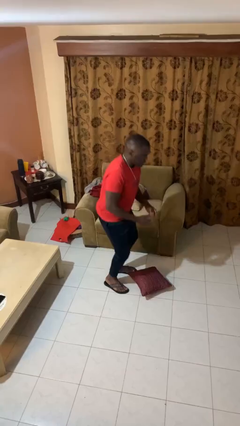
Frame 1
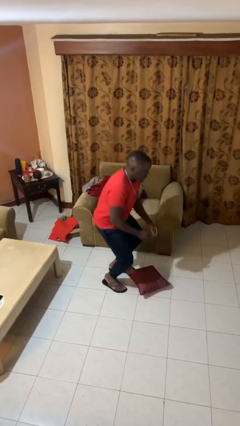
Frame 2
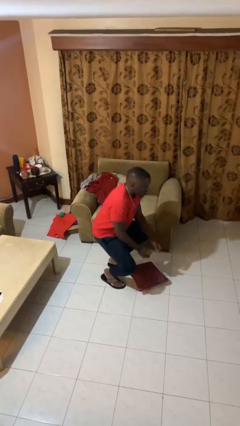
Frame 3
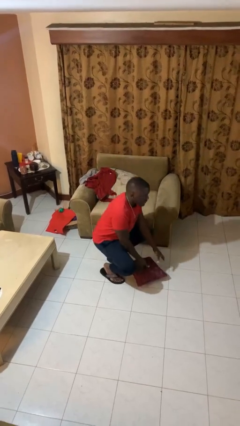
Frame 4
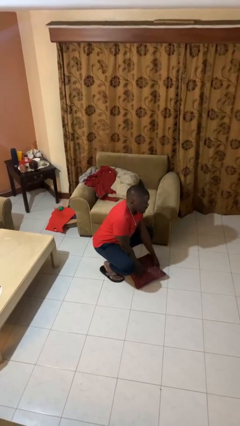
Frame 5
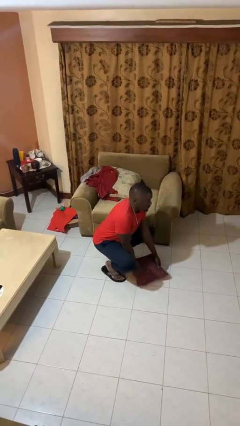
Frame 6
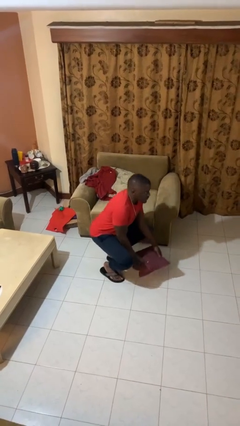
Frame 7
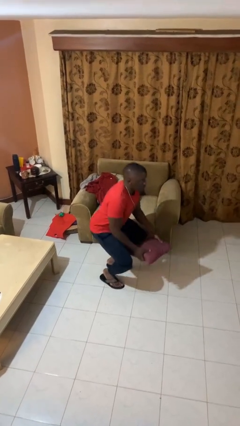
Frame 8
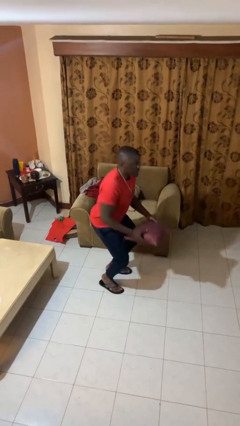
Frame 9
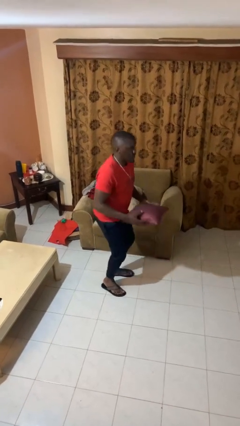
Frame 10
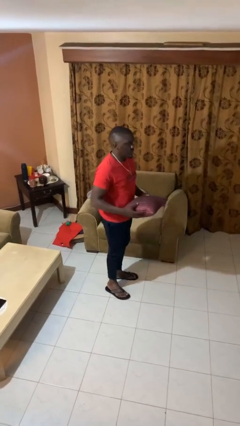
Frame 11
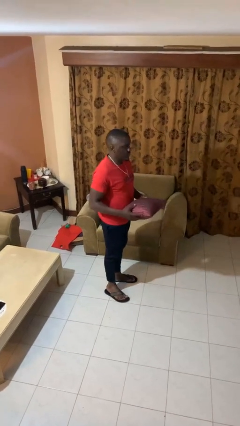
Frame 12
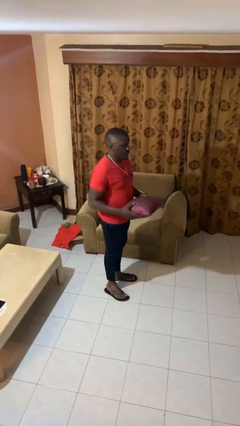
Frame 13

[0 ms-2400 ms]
person picks up object from floor

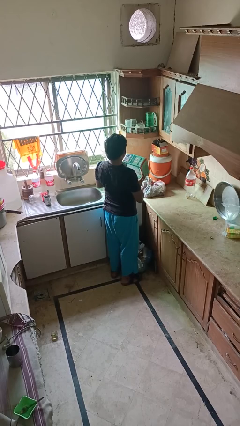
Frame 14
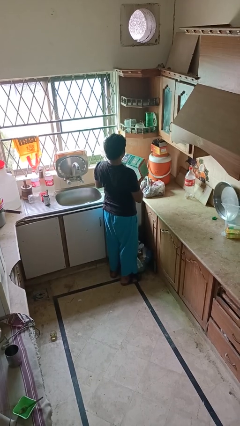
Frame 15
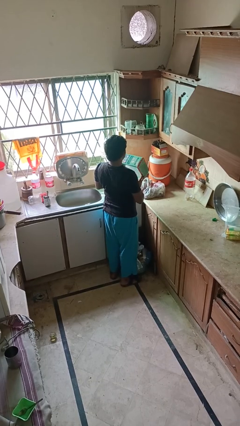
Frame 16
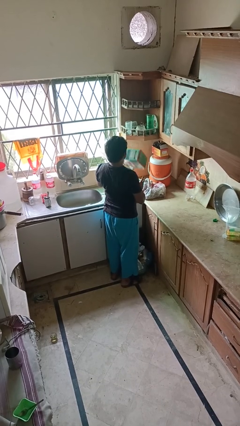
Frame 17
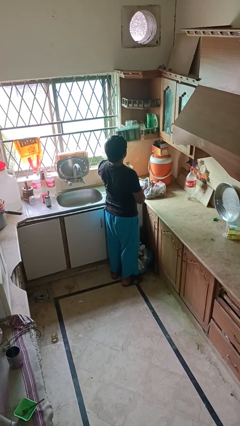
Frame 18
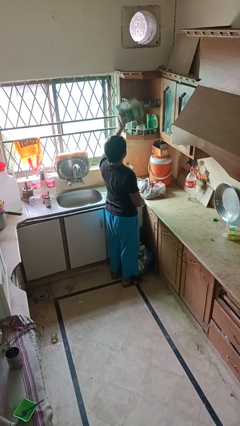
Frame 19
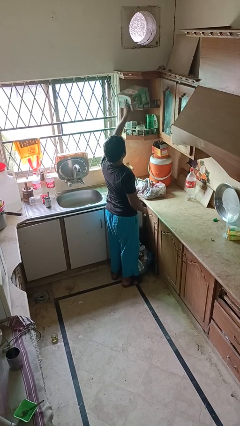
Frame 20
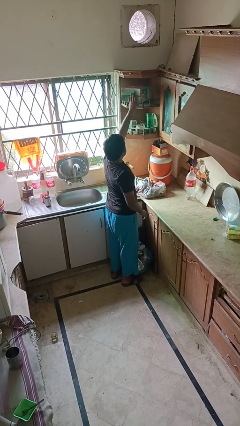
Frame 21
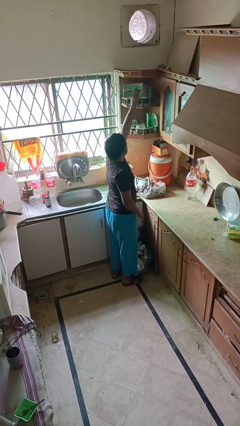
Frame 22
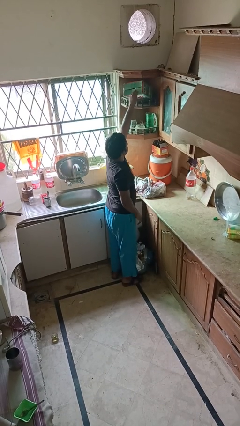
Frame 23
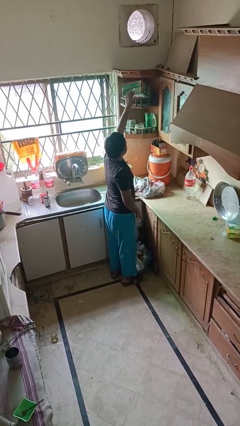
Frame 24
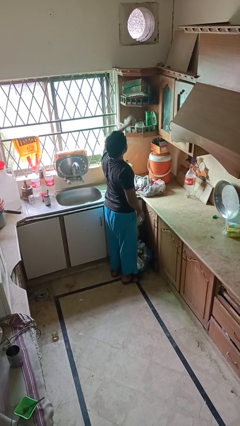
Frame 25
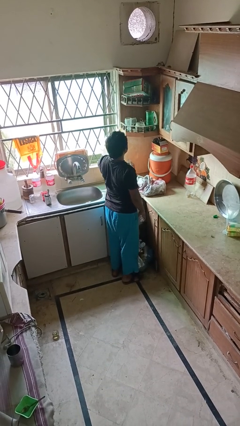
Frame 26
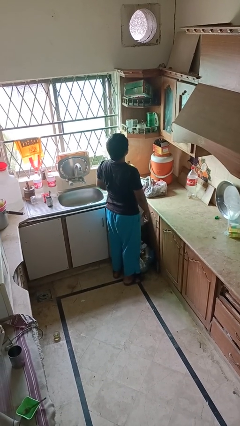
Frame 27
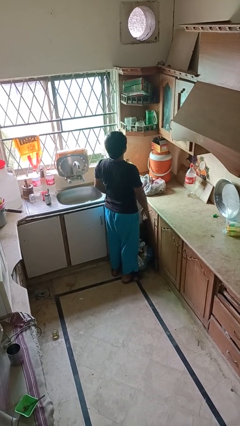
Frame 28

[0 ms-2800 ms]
person puts down object on shelf

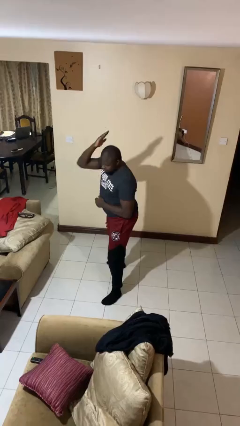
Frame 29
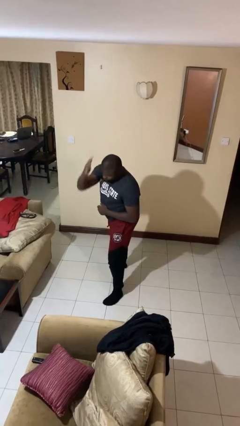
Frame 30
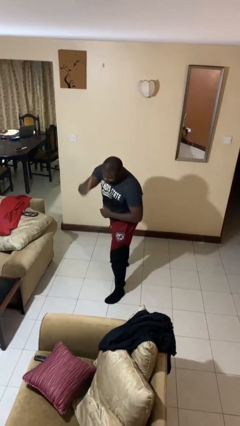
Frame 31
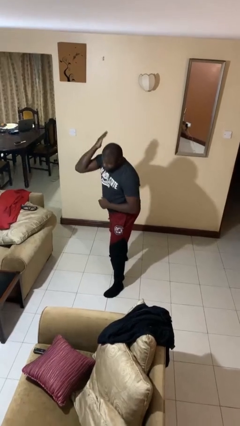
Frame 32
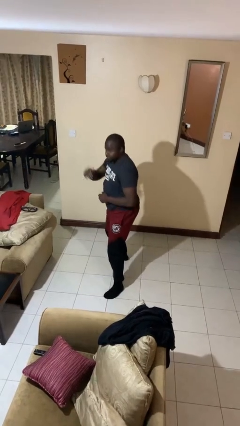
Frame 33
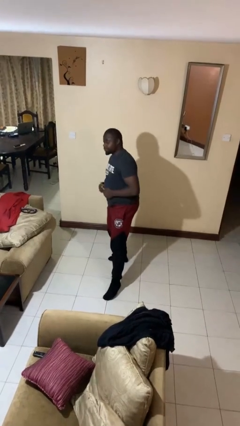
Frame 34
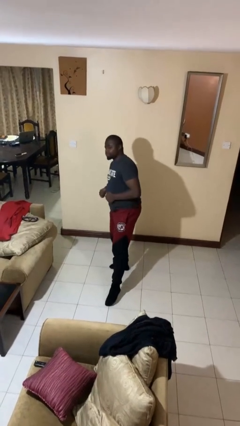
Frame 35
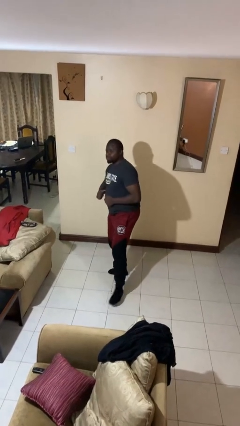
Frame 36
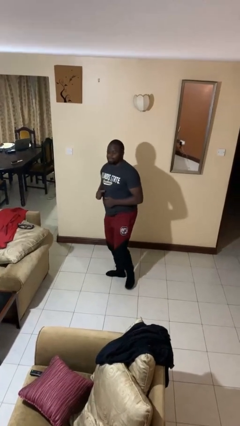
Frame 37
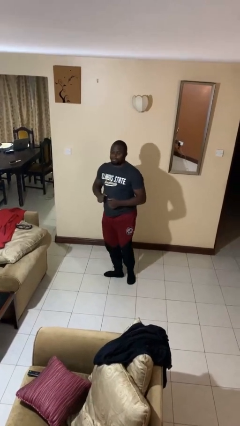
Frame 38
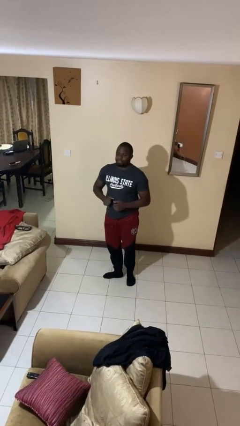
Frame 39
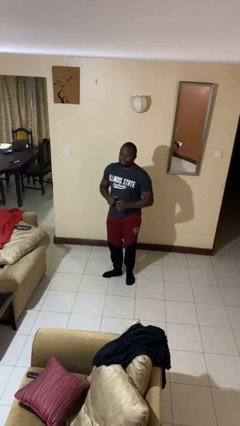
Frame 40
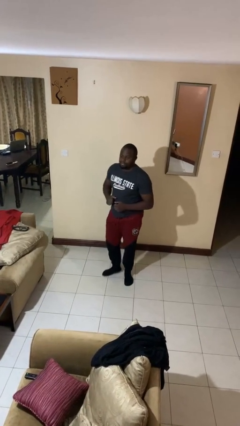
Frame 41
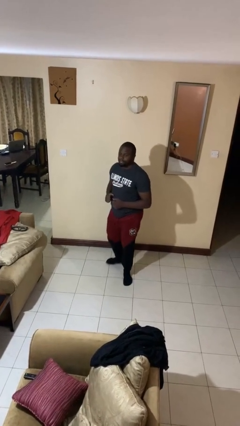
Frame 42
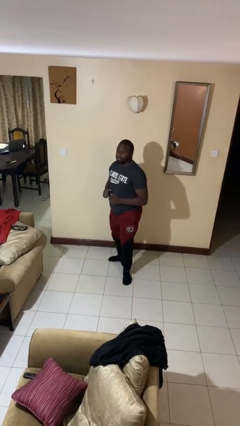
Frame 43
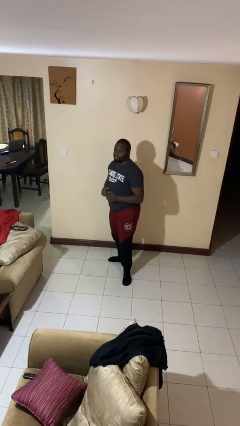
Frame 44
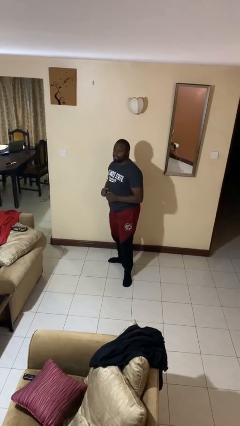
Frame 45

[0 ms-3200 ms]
person karate chop

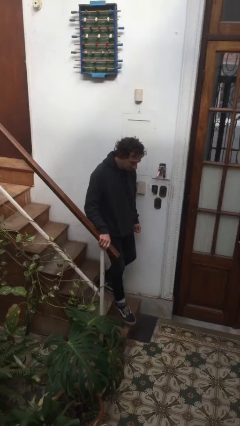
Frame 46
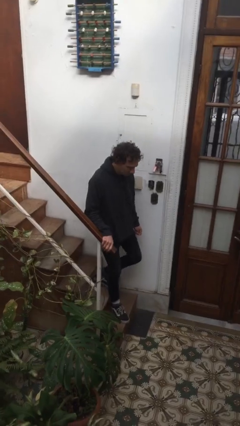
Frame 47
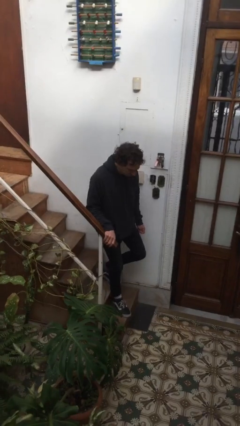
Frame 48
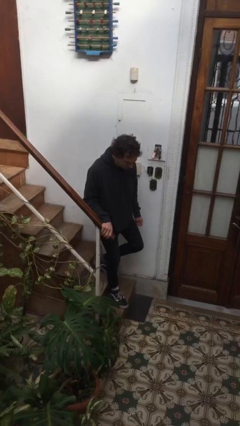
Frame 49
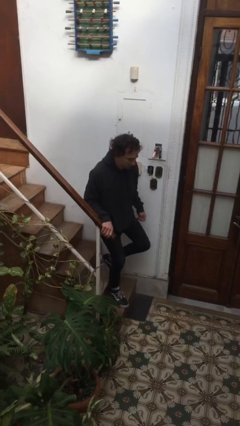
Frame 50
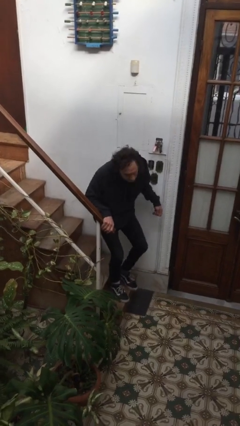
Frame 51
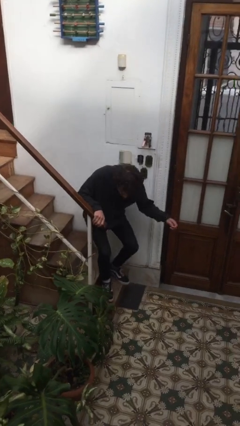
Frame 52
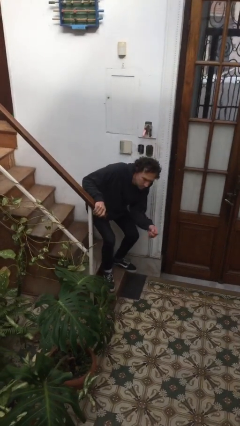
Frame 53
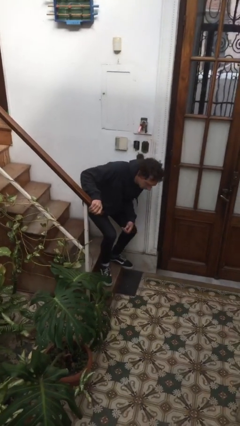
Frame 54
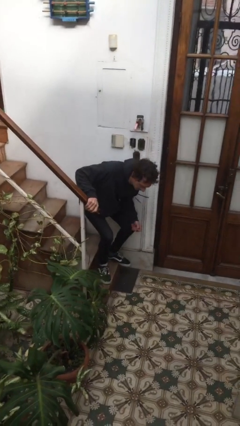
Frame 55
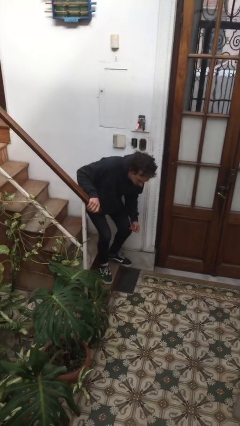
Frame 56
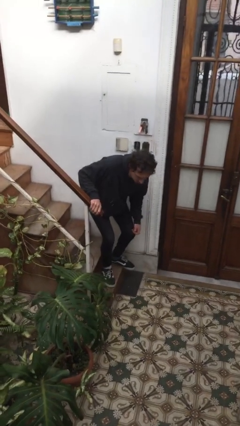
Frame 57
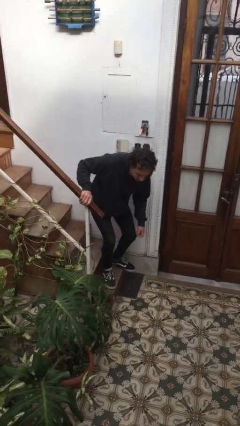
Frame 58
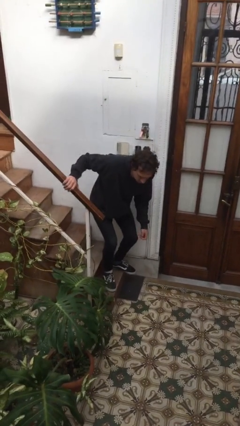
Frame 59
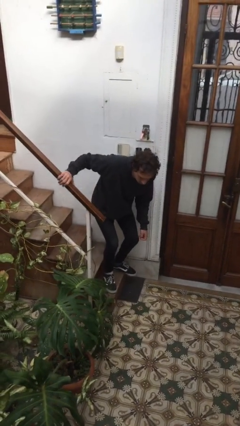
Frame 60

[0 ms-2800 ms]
person trips on stair

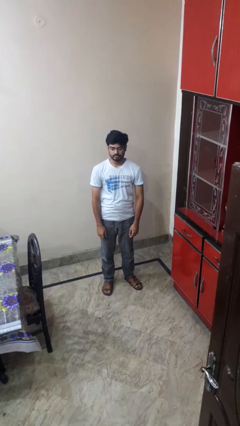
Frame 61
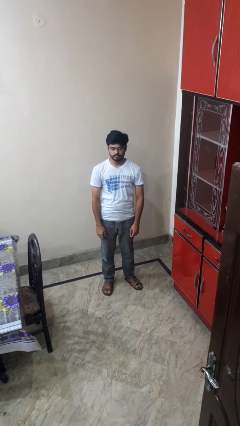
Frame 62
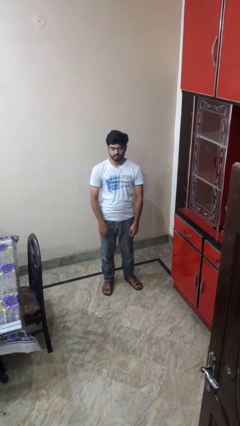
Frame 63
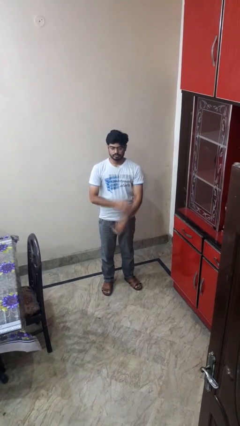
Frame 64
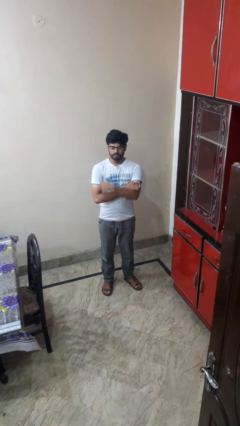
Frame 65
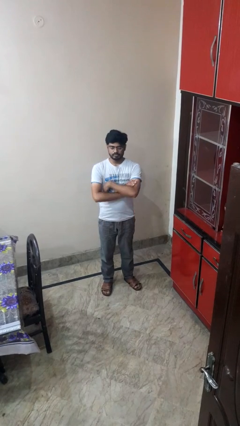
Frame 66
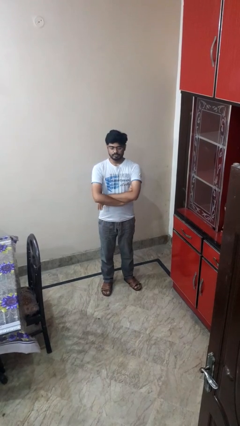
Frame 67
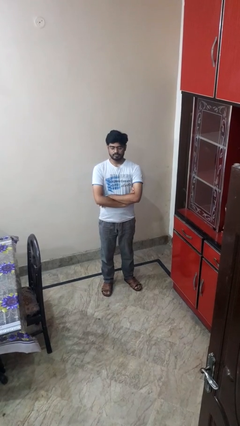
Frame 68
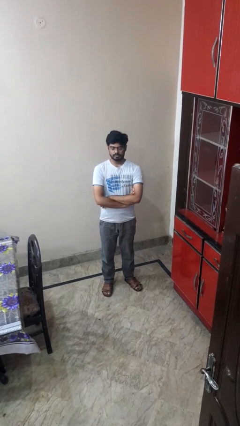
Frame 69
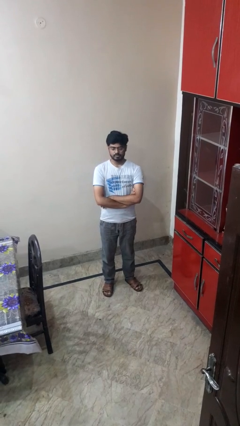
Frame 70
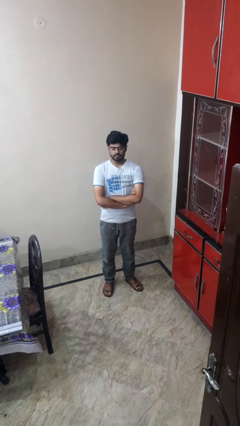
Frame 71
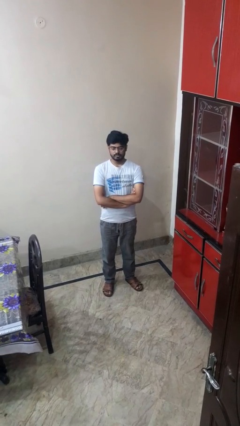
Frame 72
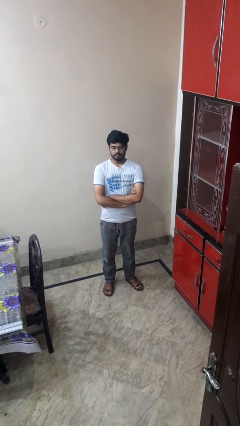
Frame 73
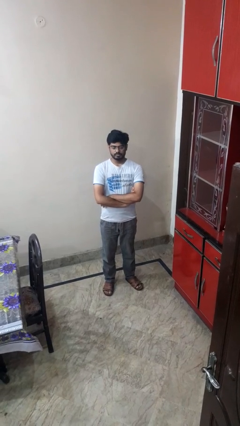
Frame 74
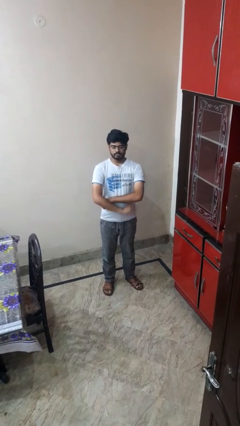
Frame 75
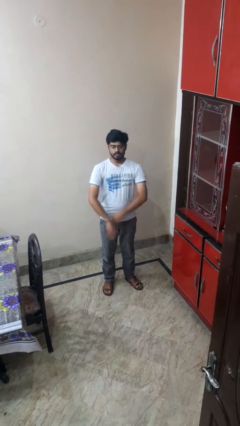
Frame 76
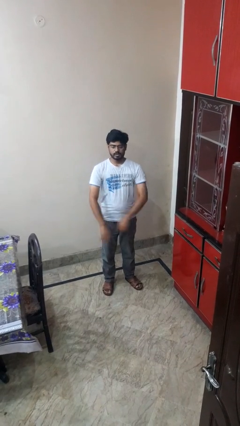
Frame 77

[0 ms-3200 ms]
person crosses arms

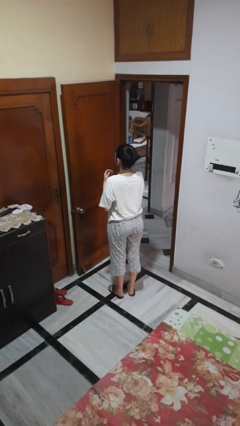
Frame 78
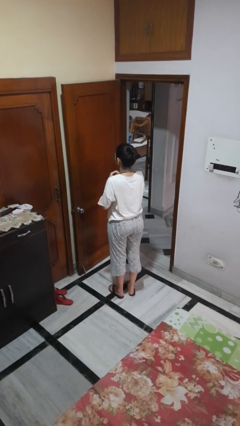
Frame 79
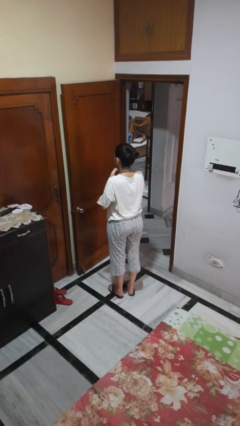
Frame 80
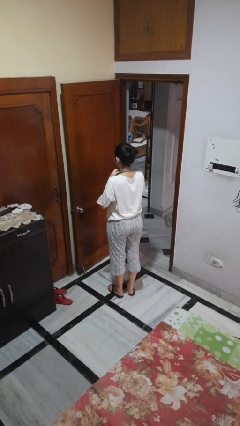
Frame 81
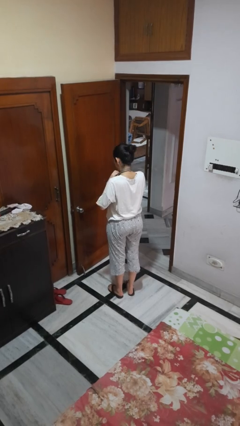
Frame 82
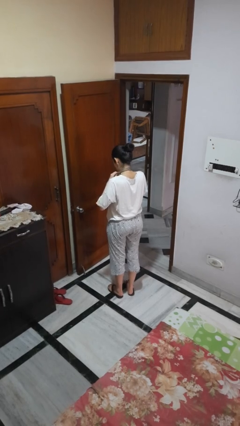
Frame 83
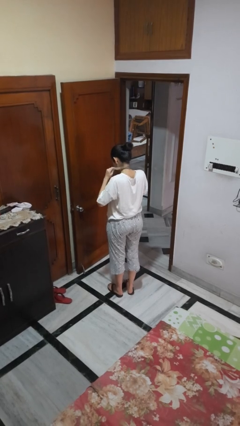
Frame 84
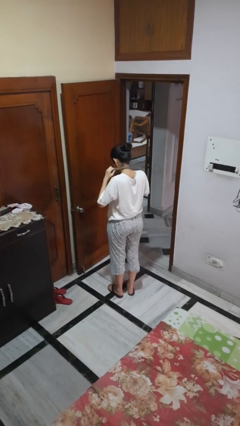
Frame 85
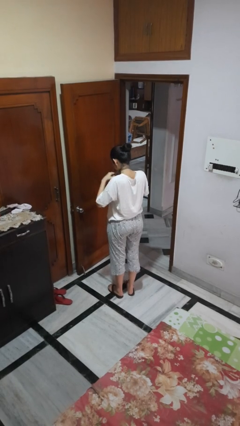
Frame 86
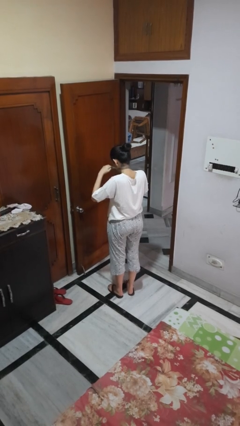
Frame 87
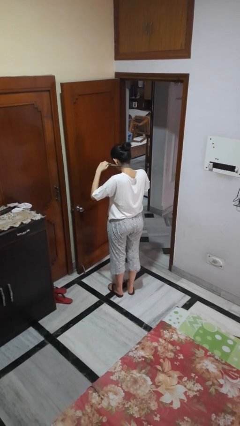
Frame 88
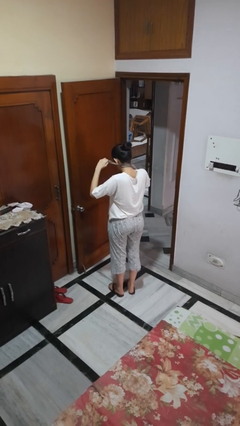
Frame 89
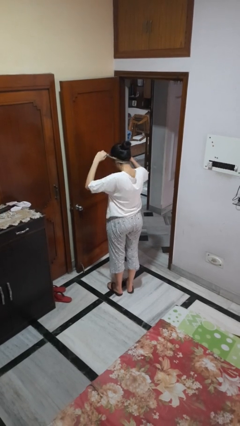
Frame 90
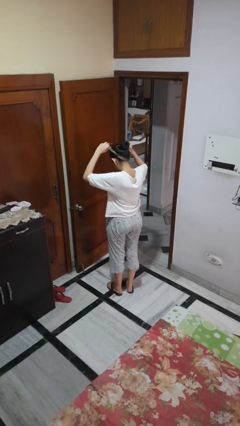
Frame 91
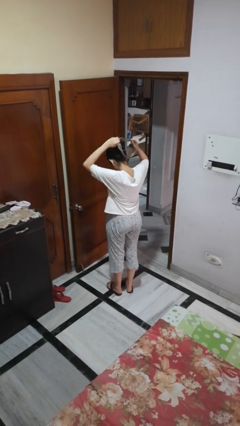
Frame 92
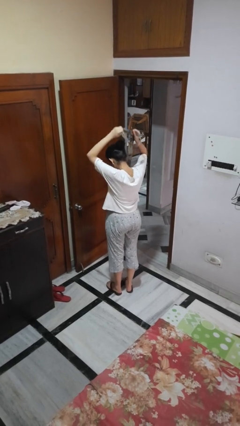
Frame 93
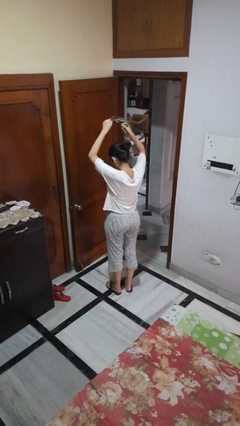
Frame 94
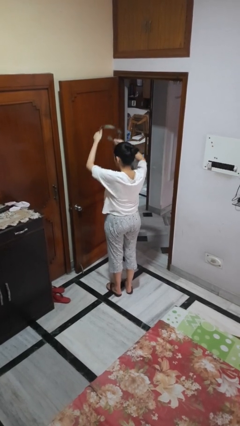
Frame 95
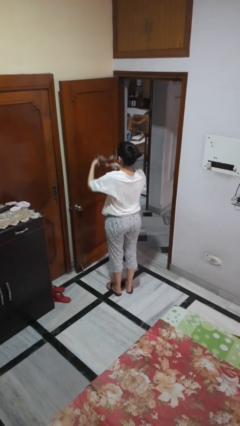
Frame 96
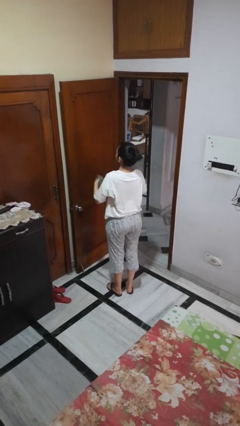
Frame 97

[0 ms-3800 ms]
person takes off necktie
